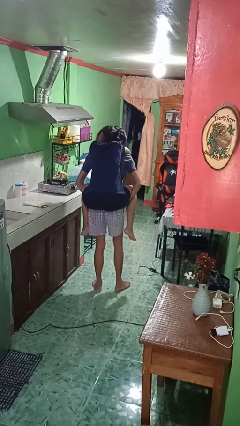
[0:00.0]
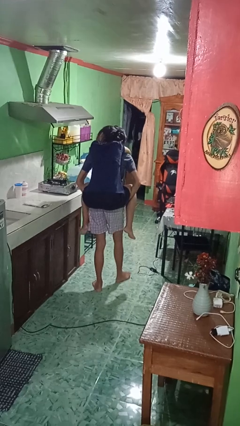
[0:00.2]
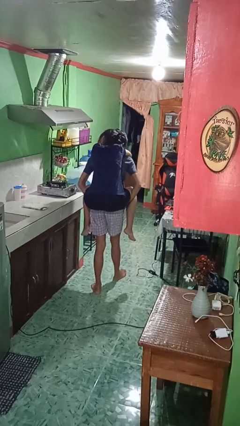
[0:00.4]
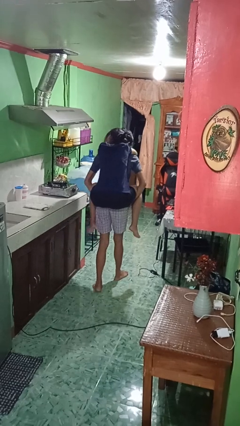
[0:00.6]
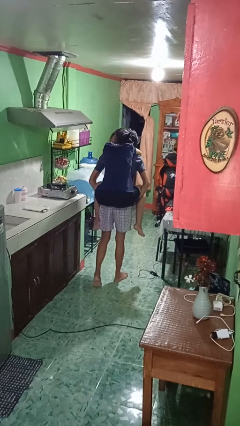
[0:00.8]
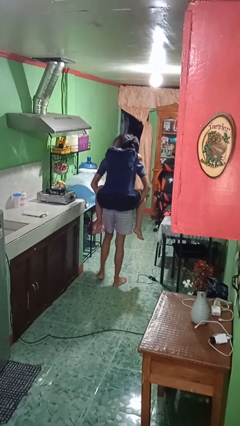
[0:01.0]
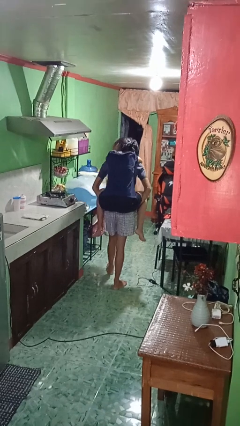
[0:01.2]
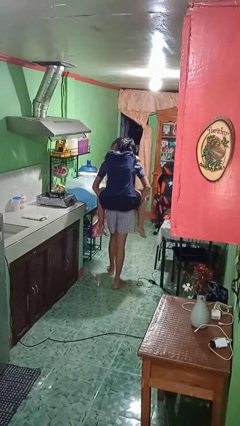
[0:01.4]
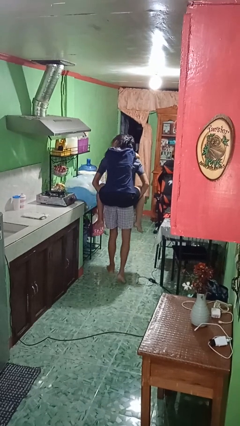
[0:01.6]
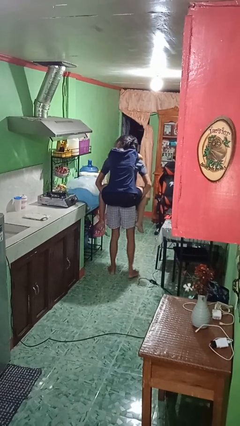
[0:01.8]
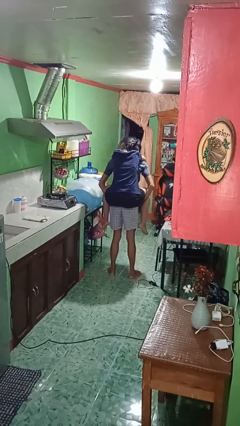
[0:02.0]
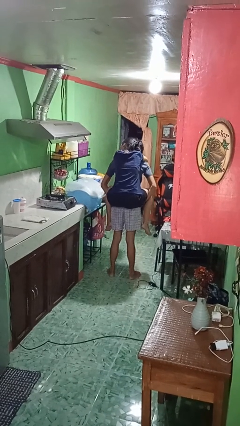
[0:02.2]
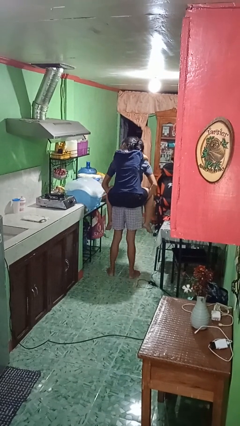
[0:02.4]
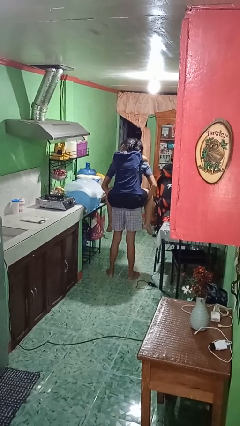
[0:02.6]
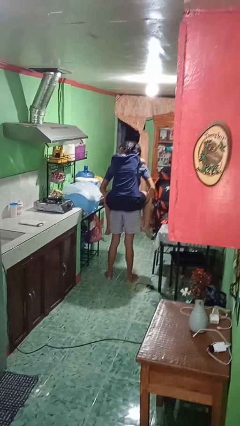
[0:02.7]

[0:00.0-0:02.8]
person carries person on back

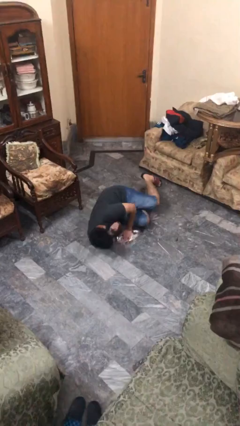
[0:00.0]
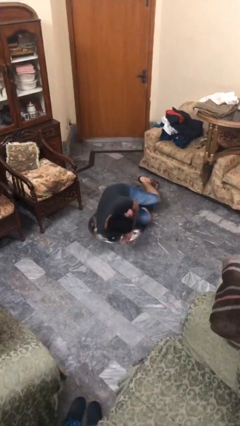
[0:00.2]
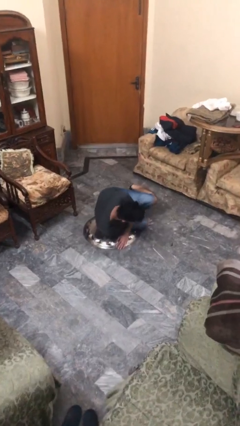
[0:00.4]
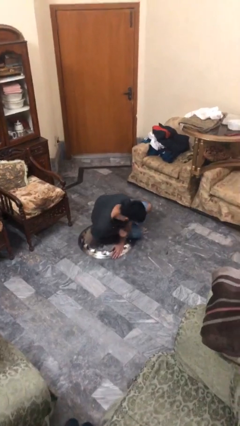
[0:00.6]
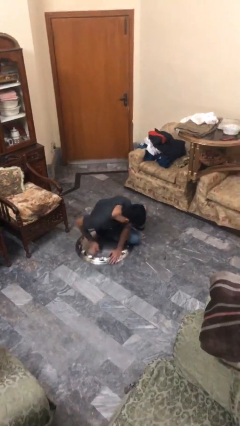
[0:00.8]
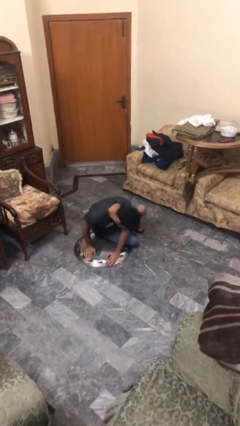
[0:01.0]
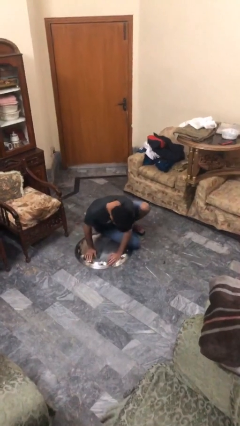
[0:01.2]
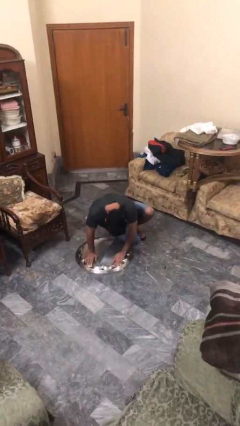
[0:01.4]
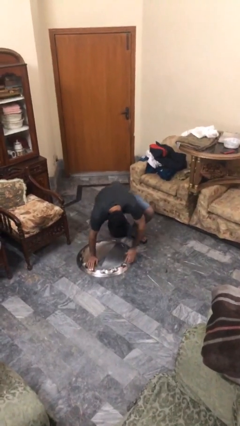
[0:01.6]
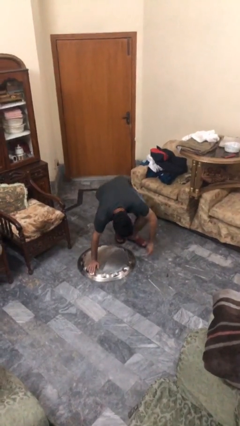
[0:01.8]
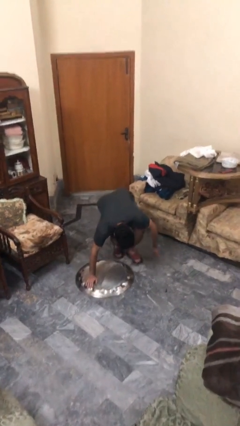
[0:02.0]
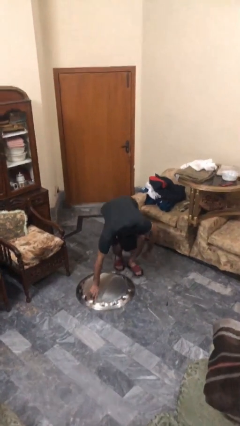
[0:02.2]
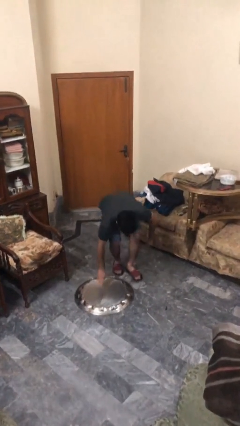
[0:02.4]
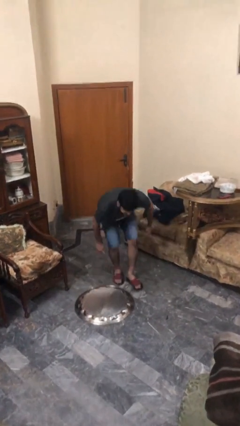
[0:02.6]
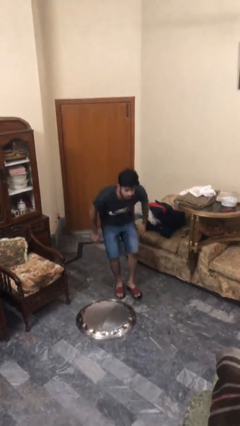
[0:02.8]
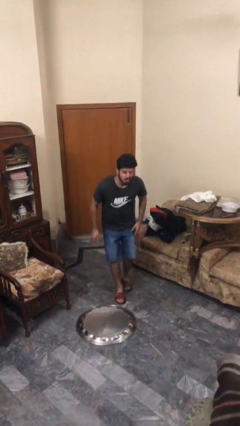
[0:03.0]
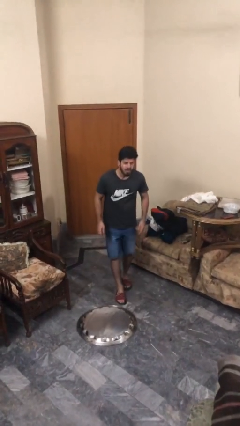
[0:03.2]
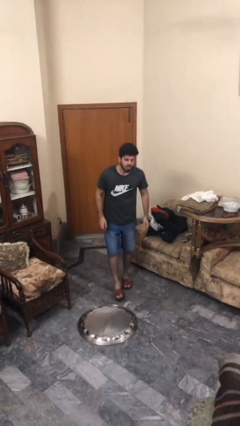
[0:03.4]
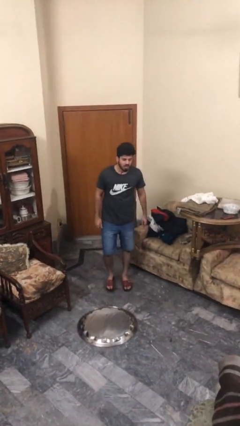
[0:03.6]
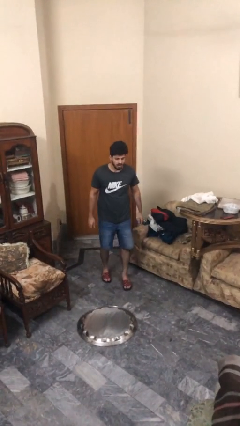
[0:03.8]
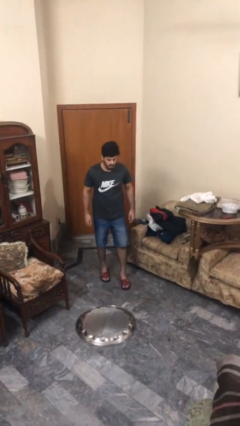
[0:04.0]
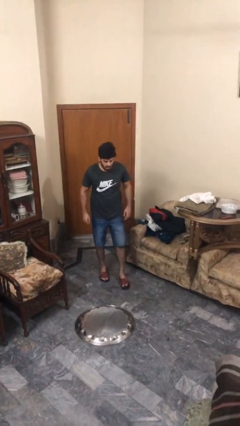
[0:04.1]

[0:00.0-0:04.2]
person stands up from floor

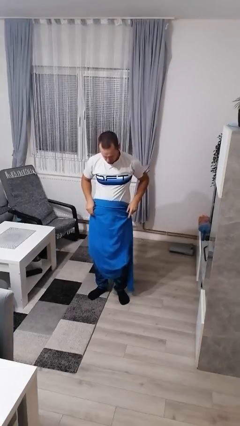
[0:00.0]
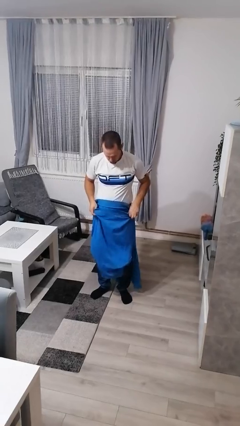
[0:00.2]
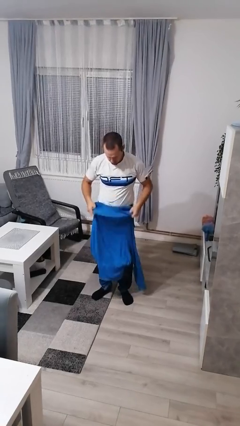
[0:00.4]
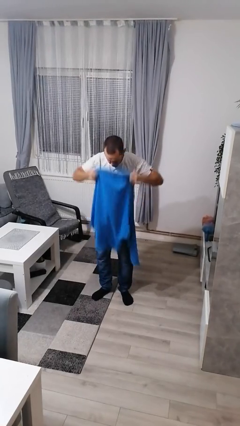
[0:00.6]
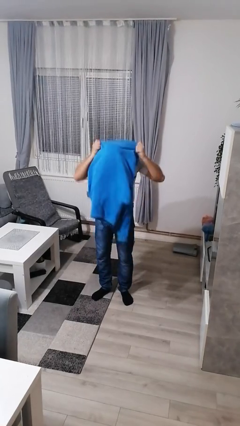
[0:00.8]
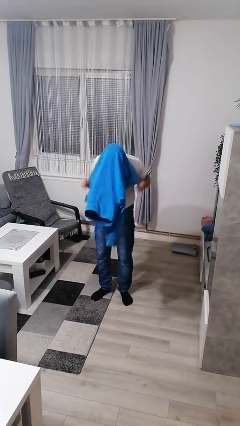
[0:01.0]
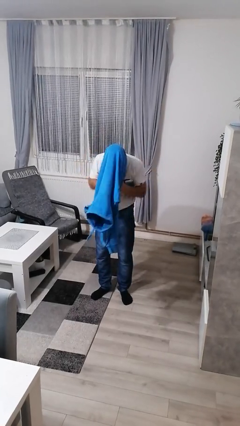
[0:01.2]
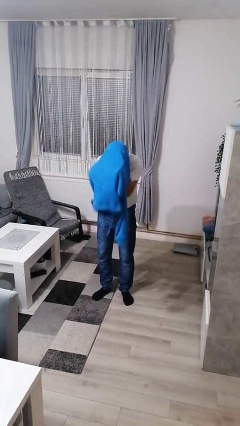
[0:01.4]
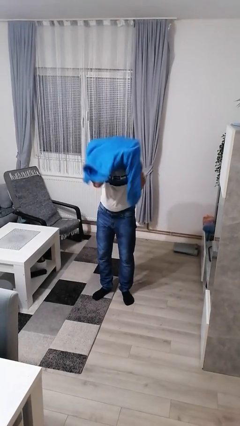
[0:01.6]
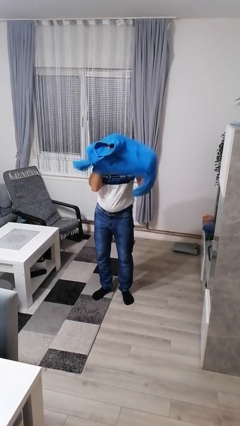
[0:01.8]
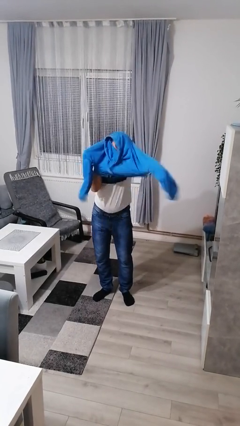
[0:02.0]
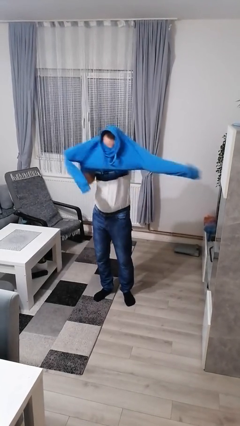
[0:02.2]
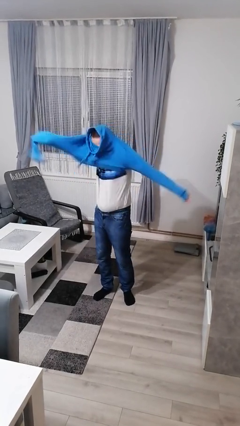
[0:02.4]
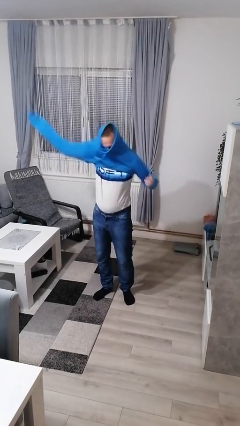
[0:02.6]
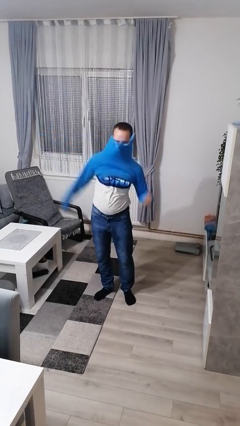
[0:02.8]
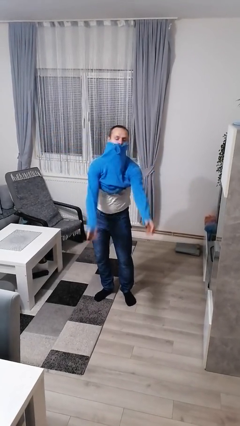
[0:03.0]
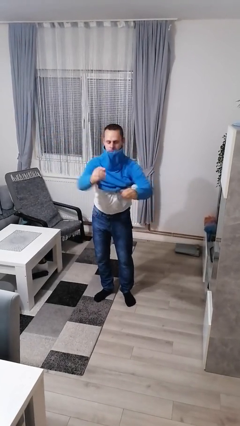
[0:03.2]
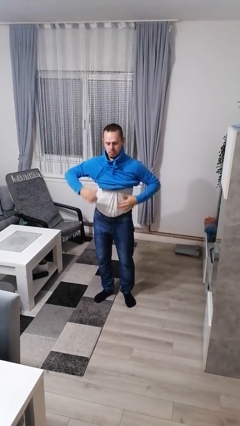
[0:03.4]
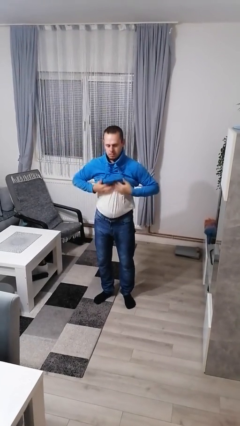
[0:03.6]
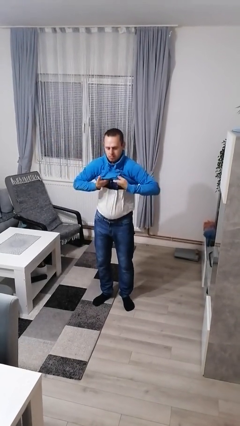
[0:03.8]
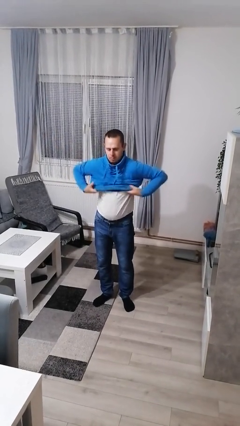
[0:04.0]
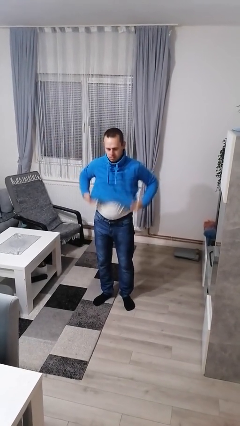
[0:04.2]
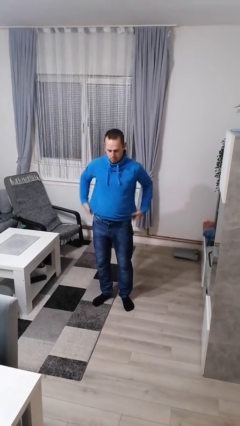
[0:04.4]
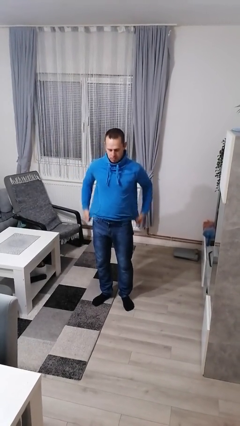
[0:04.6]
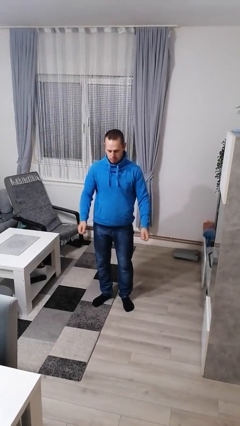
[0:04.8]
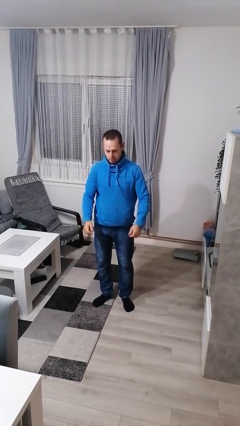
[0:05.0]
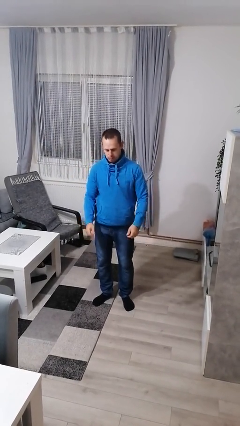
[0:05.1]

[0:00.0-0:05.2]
person puts on hoodie

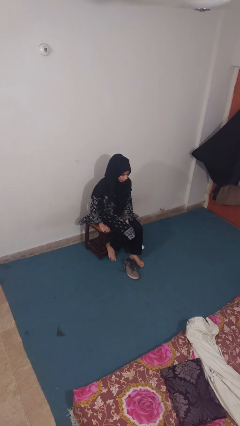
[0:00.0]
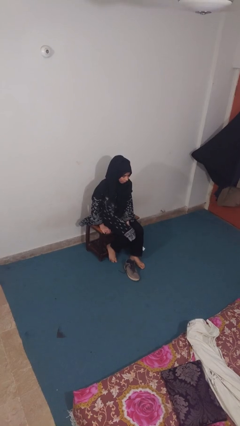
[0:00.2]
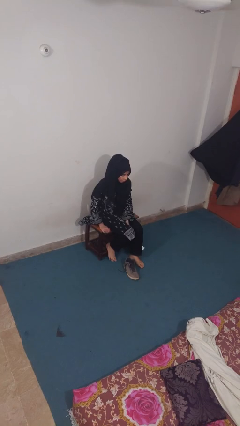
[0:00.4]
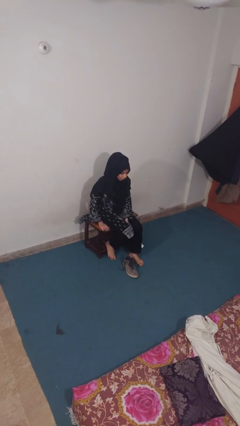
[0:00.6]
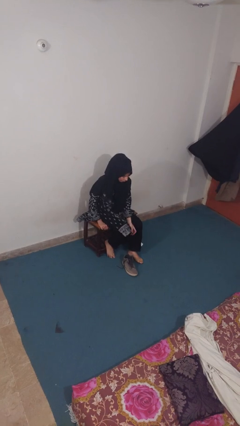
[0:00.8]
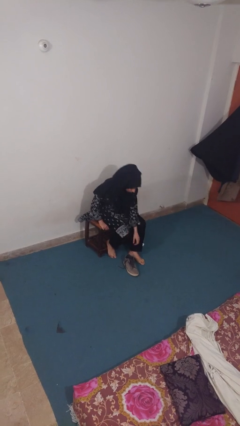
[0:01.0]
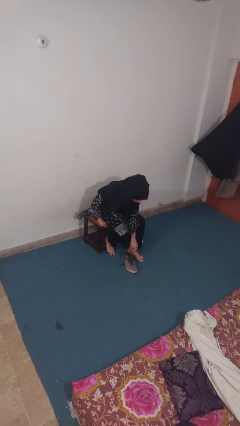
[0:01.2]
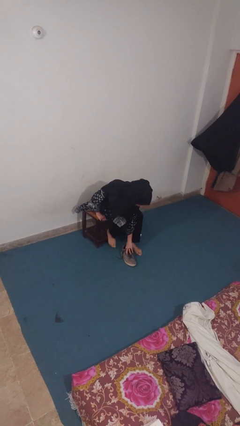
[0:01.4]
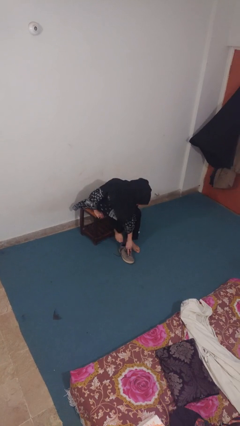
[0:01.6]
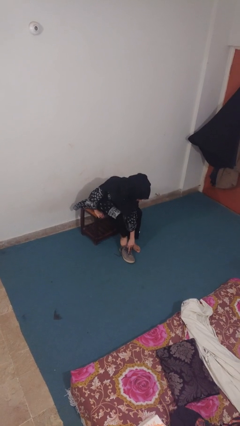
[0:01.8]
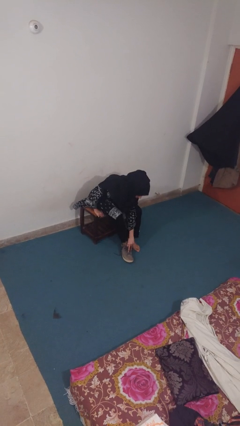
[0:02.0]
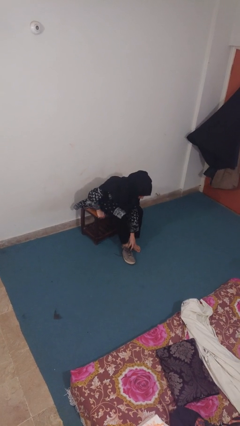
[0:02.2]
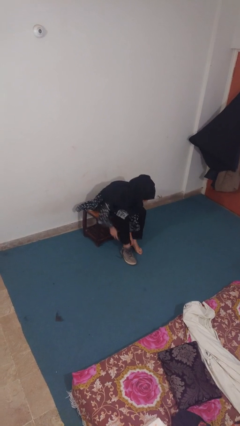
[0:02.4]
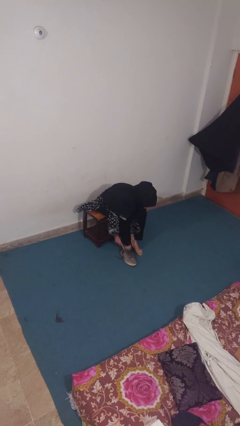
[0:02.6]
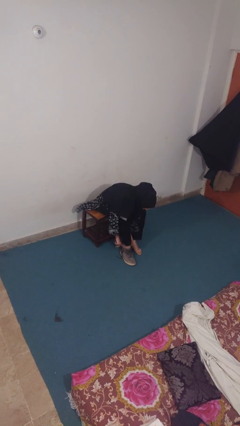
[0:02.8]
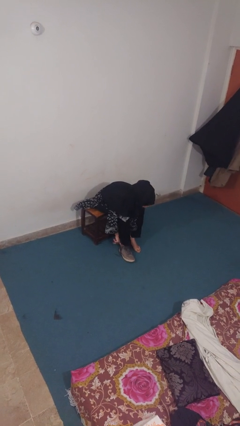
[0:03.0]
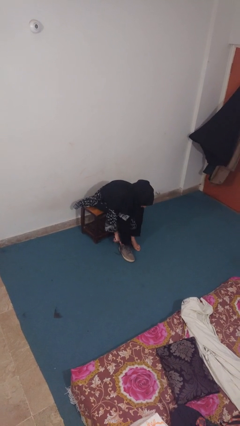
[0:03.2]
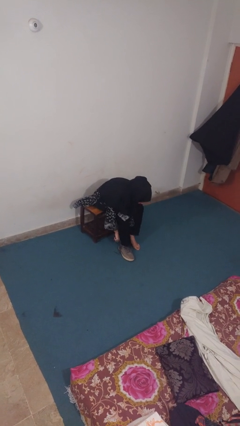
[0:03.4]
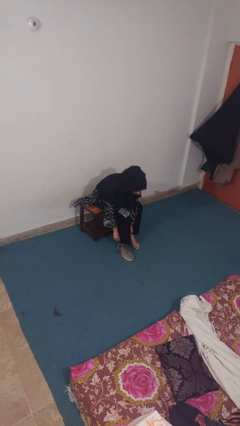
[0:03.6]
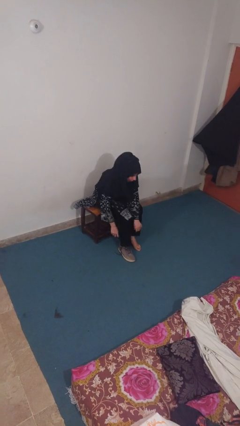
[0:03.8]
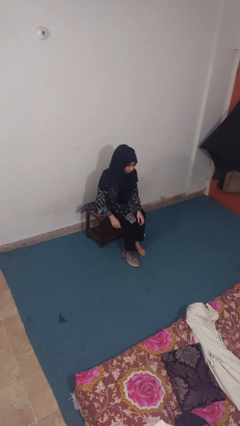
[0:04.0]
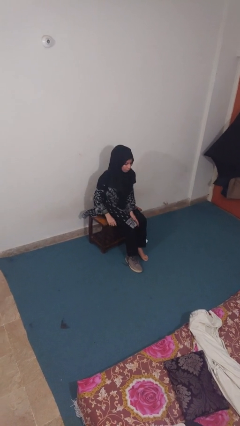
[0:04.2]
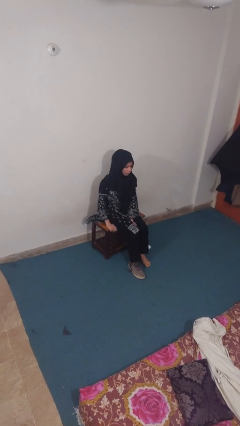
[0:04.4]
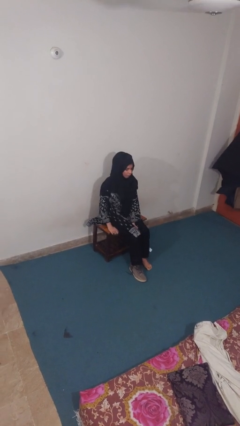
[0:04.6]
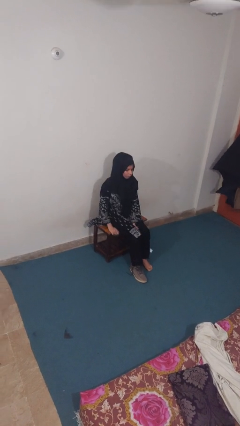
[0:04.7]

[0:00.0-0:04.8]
person puts on boots

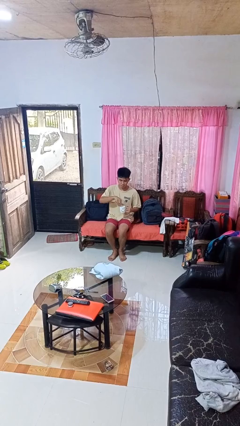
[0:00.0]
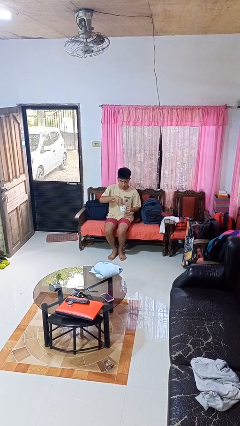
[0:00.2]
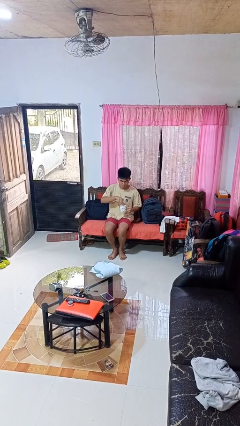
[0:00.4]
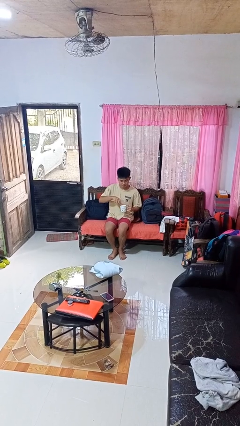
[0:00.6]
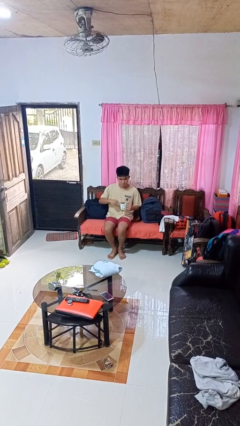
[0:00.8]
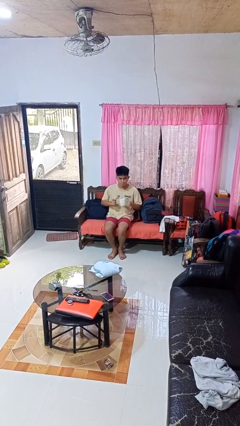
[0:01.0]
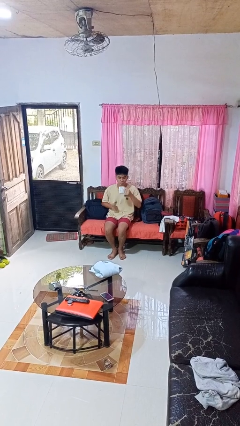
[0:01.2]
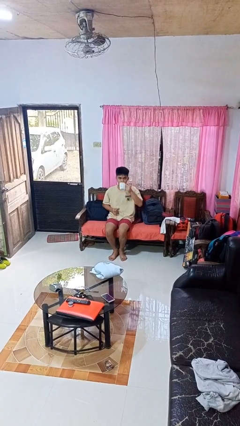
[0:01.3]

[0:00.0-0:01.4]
person stirs mug
